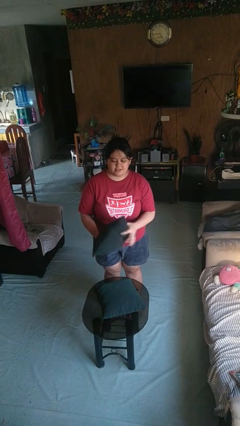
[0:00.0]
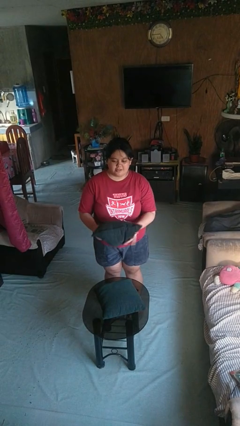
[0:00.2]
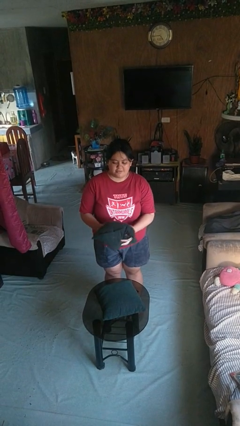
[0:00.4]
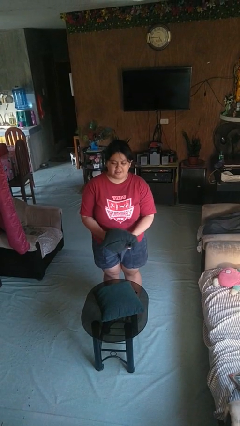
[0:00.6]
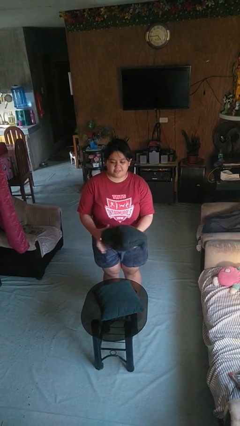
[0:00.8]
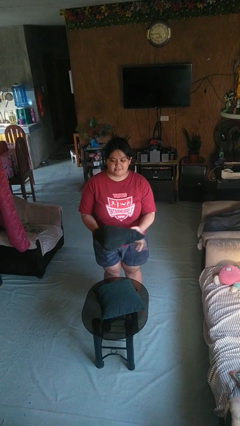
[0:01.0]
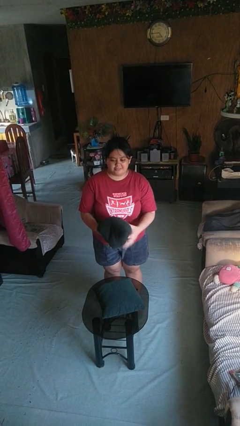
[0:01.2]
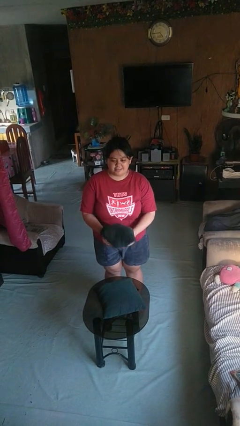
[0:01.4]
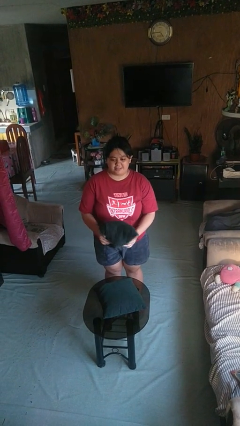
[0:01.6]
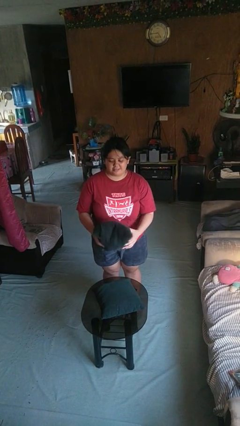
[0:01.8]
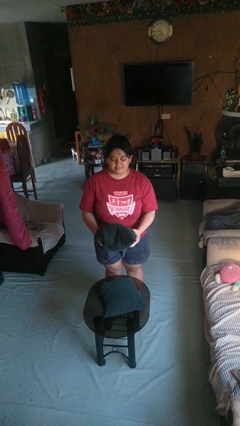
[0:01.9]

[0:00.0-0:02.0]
person squeezes object

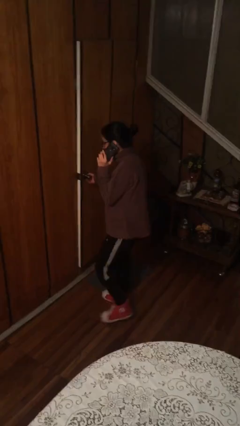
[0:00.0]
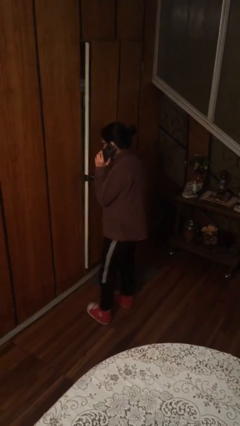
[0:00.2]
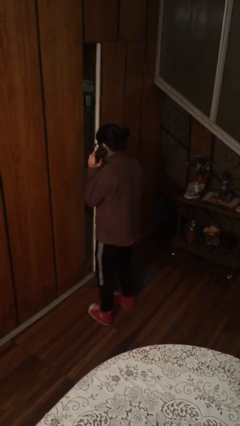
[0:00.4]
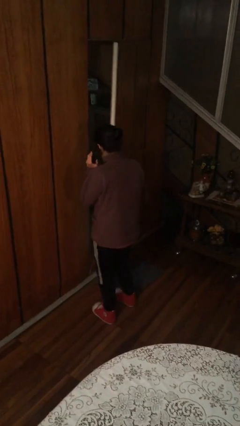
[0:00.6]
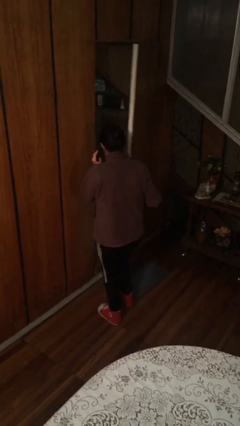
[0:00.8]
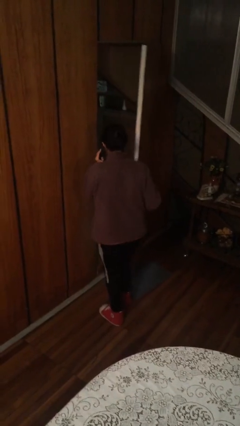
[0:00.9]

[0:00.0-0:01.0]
person opens facility door

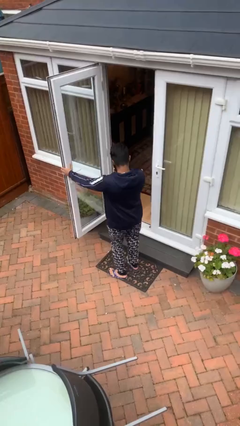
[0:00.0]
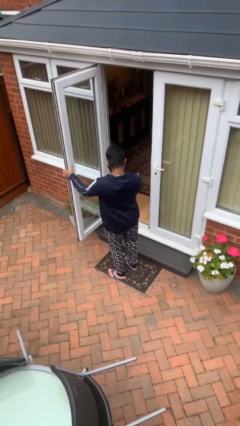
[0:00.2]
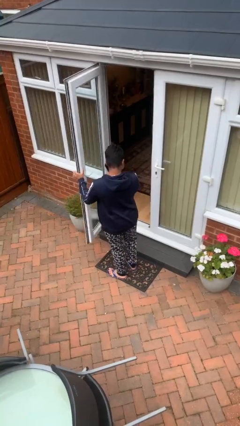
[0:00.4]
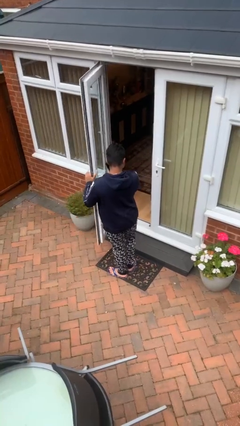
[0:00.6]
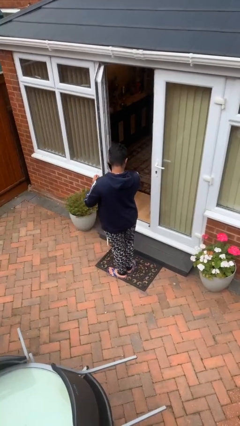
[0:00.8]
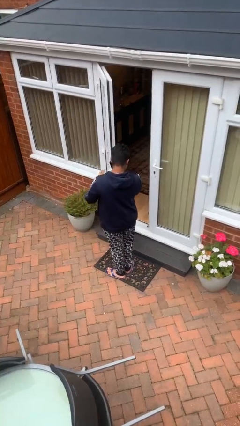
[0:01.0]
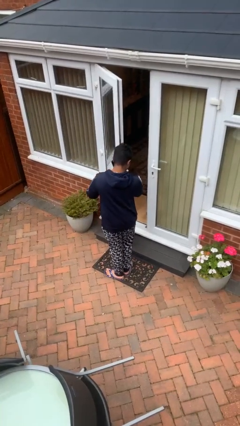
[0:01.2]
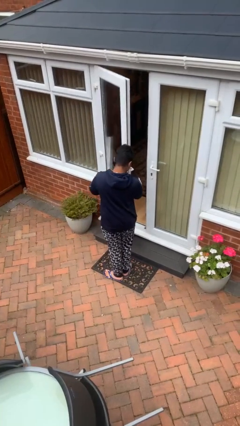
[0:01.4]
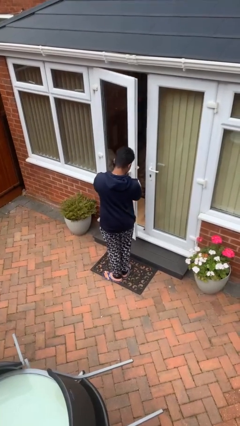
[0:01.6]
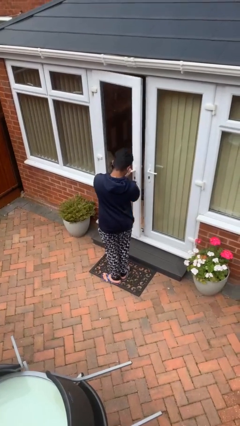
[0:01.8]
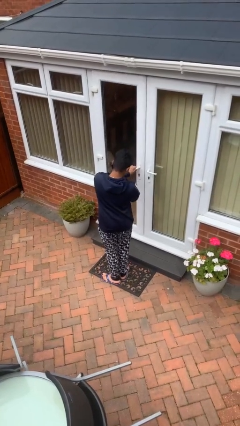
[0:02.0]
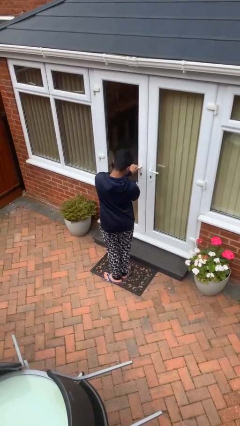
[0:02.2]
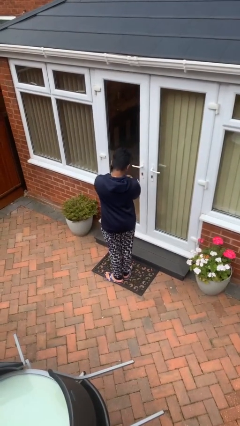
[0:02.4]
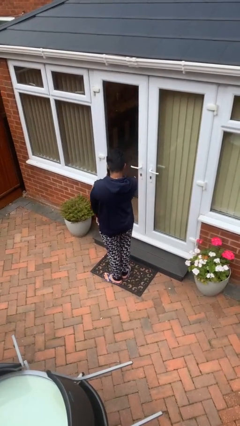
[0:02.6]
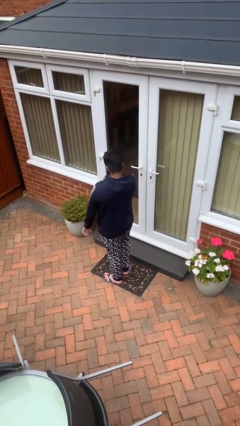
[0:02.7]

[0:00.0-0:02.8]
person closes facility door

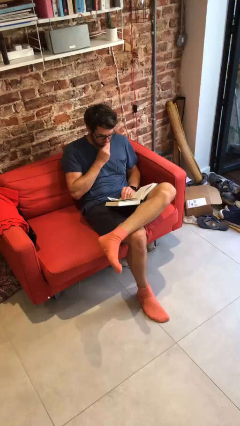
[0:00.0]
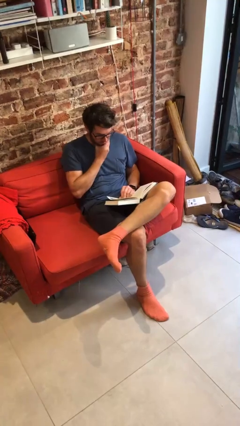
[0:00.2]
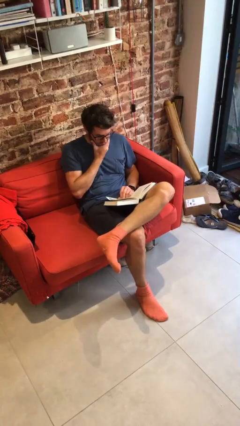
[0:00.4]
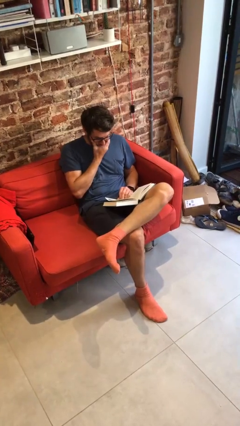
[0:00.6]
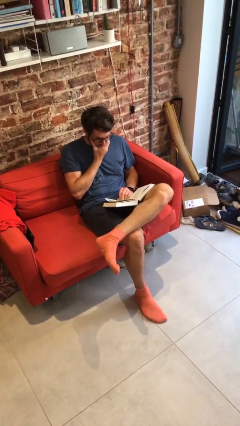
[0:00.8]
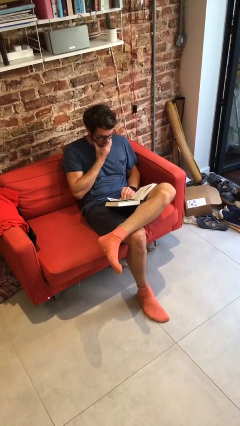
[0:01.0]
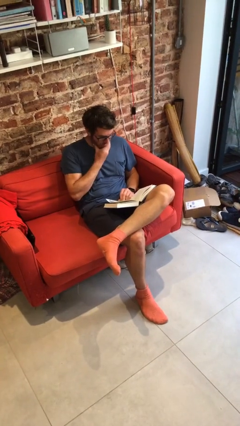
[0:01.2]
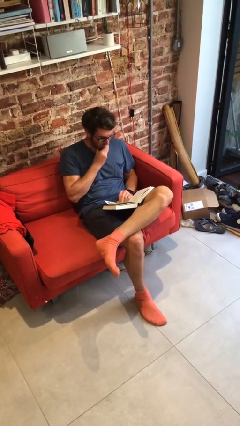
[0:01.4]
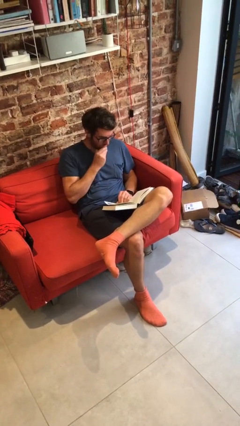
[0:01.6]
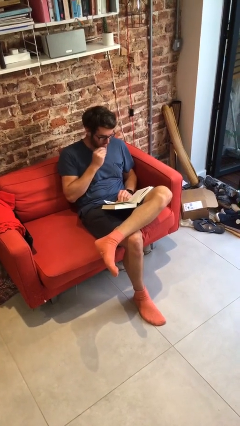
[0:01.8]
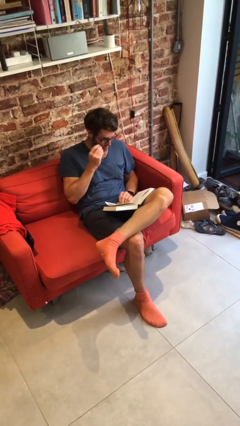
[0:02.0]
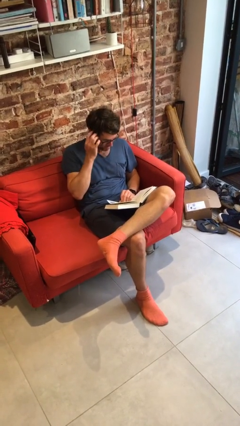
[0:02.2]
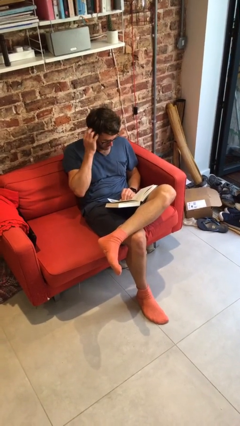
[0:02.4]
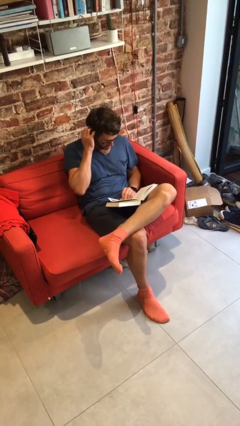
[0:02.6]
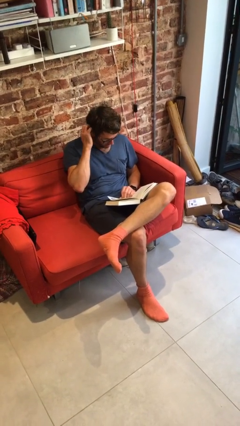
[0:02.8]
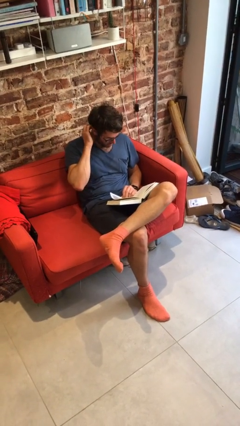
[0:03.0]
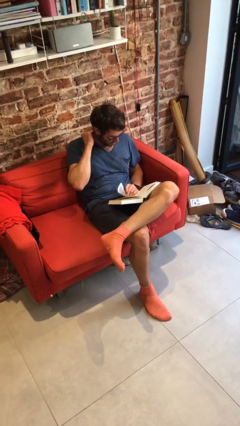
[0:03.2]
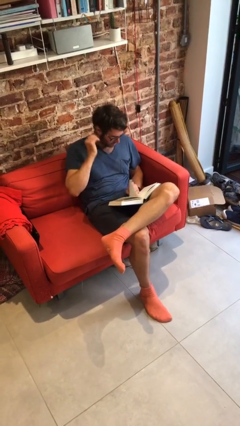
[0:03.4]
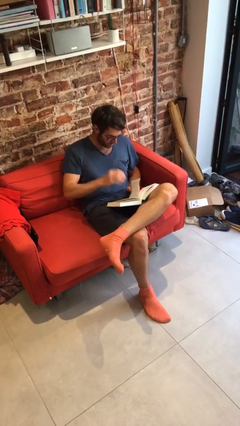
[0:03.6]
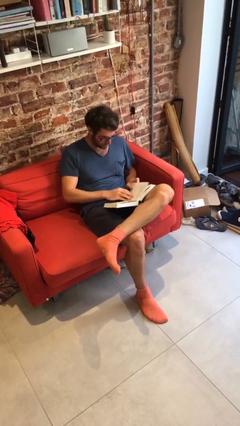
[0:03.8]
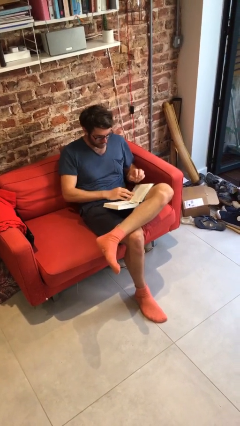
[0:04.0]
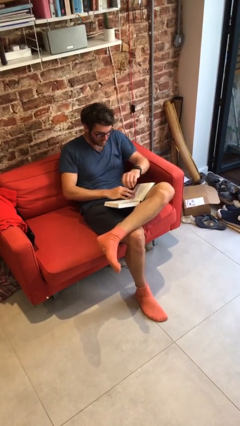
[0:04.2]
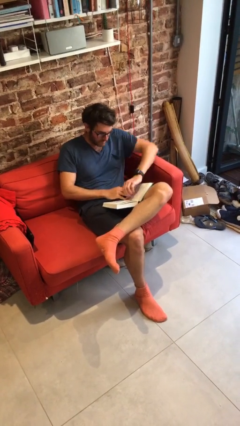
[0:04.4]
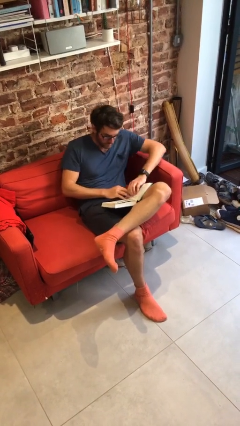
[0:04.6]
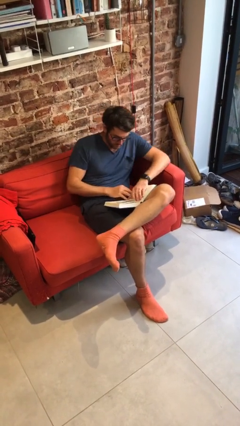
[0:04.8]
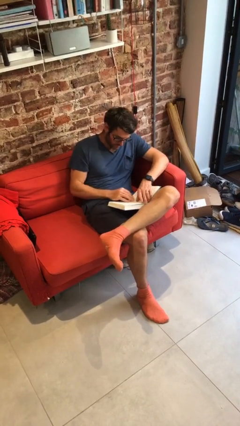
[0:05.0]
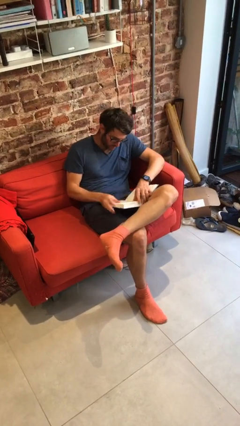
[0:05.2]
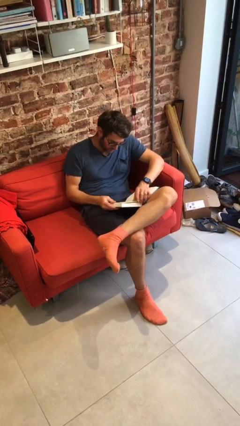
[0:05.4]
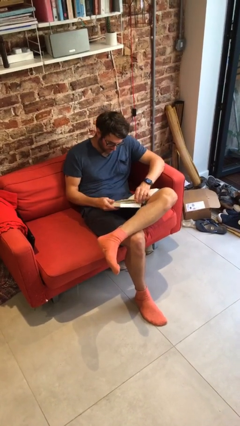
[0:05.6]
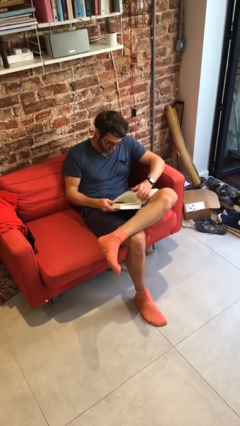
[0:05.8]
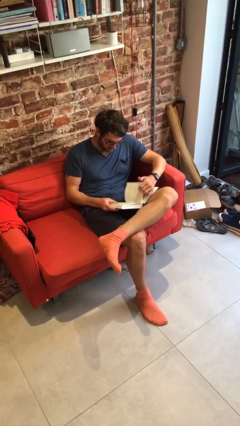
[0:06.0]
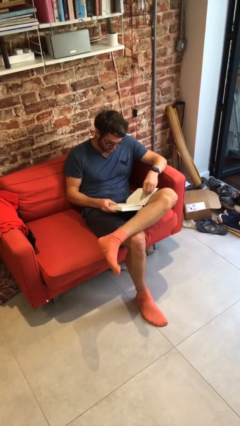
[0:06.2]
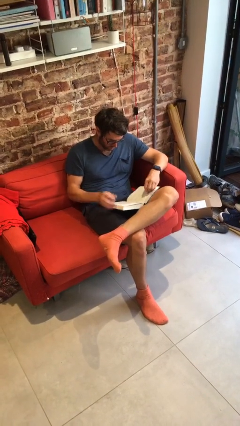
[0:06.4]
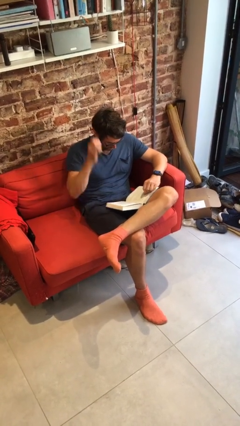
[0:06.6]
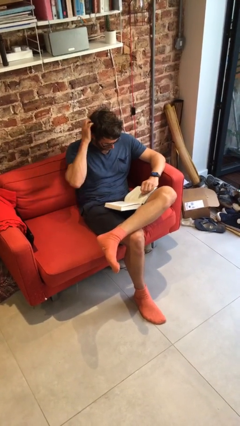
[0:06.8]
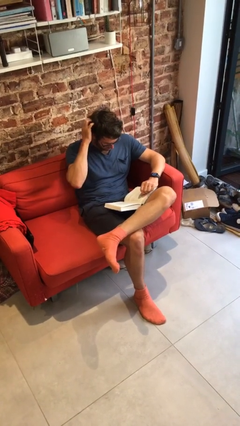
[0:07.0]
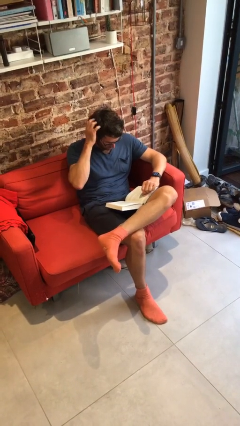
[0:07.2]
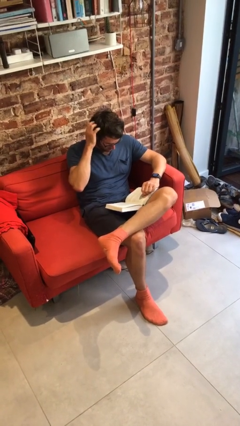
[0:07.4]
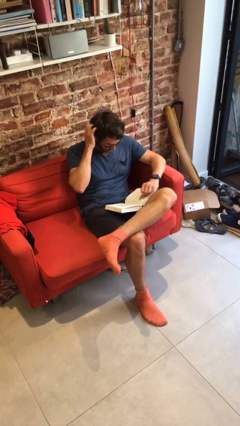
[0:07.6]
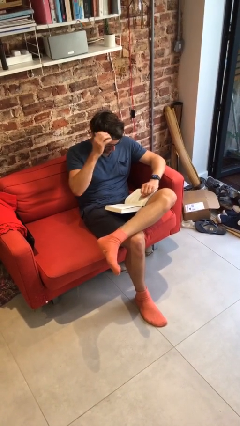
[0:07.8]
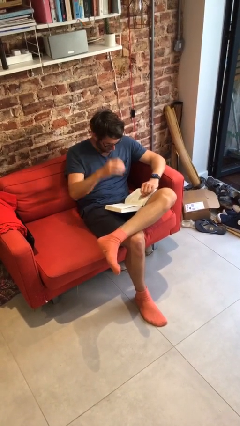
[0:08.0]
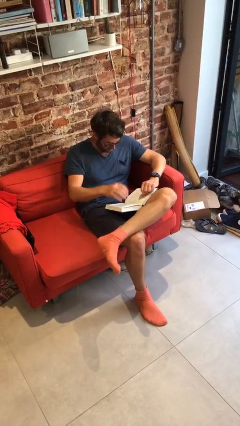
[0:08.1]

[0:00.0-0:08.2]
person reads document

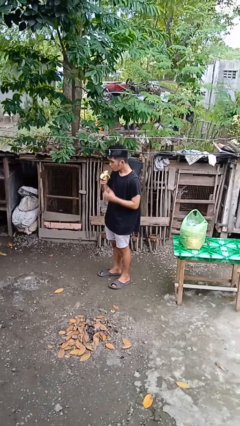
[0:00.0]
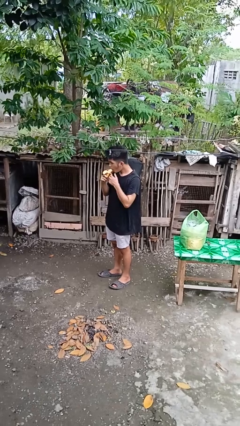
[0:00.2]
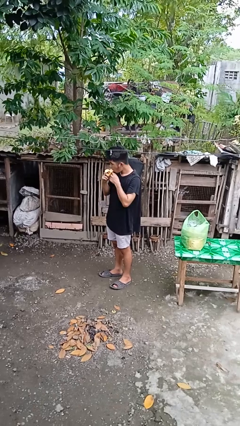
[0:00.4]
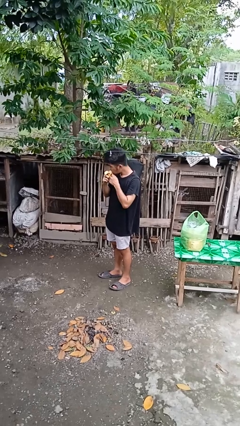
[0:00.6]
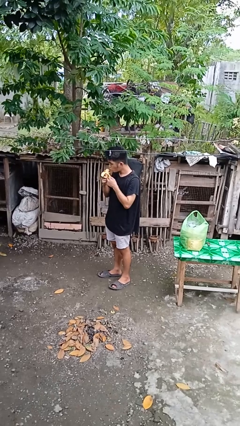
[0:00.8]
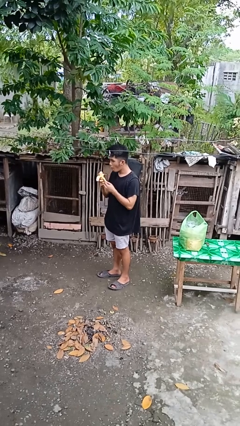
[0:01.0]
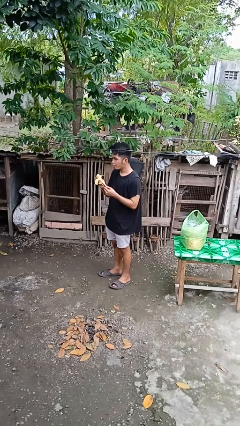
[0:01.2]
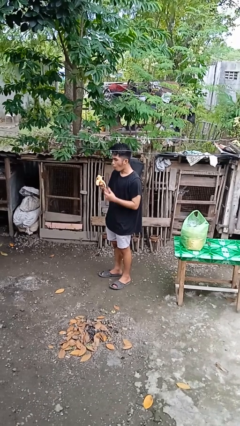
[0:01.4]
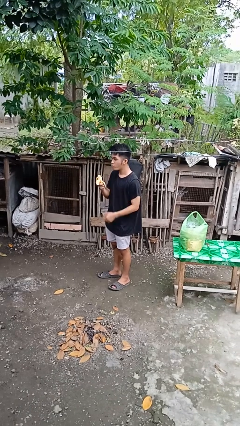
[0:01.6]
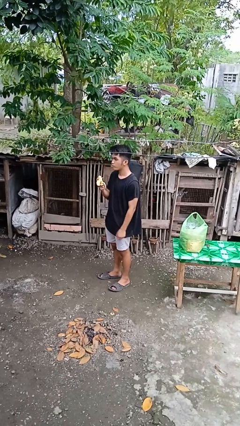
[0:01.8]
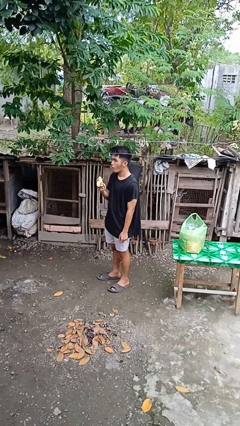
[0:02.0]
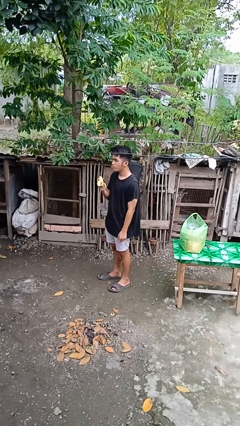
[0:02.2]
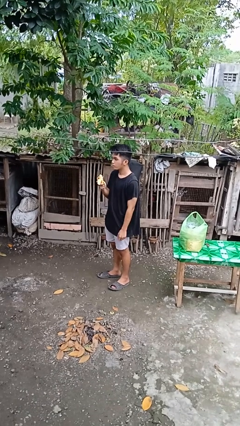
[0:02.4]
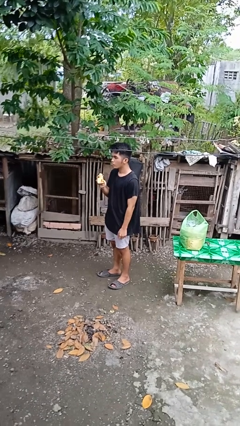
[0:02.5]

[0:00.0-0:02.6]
person eats banana

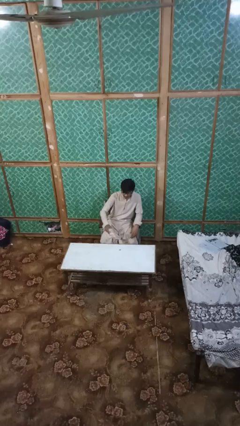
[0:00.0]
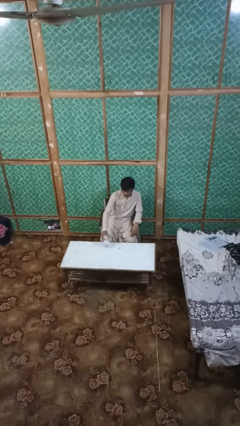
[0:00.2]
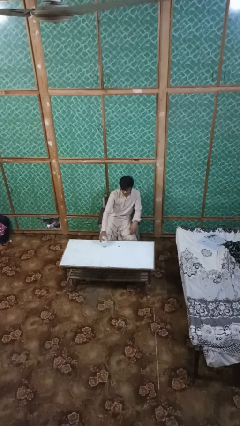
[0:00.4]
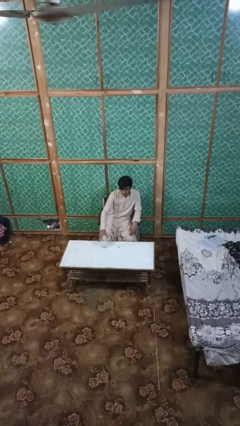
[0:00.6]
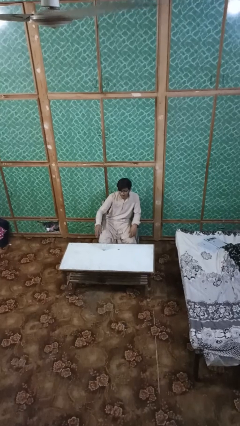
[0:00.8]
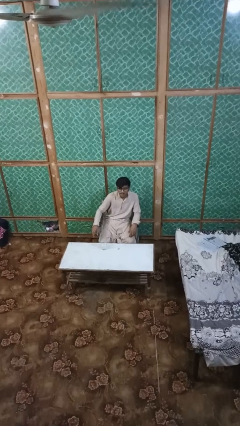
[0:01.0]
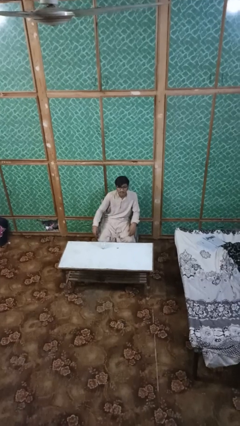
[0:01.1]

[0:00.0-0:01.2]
person puts down object on table
